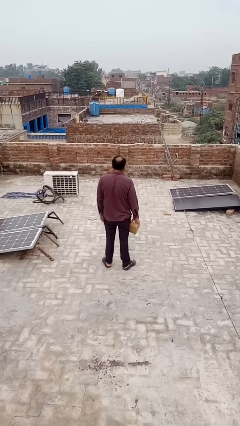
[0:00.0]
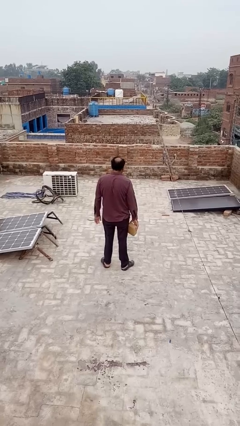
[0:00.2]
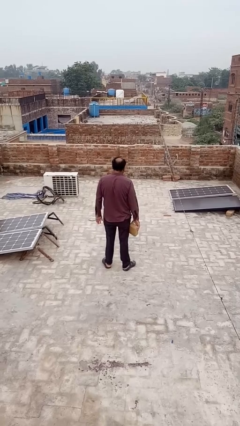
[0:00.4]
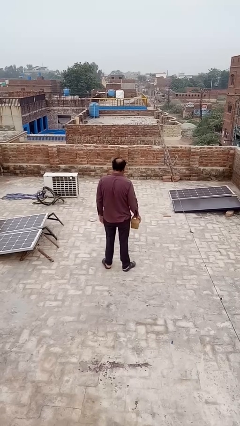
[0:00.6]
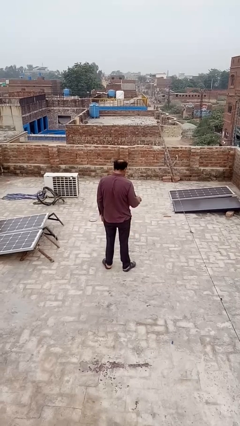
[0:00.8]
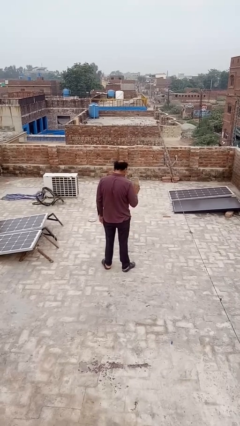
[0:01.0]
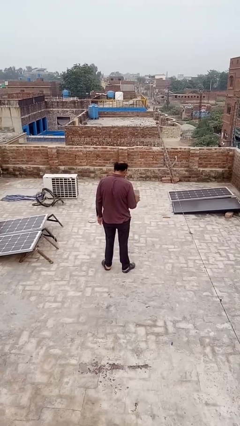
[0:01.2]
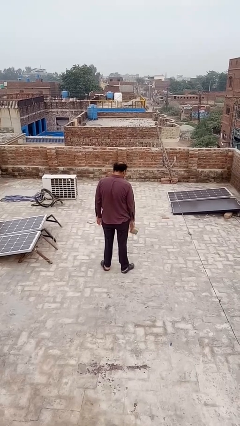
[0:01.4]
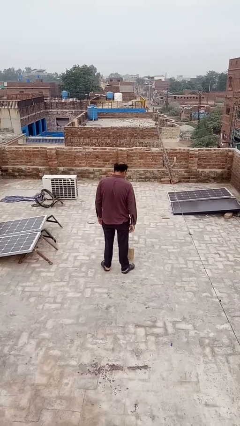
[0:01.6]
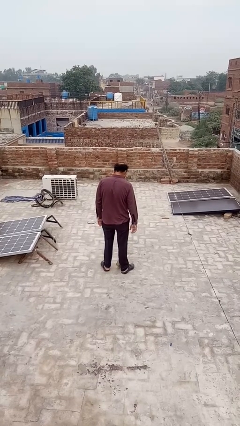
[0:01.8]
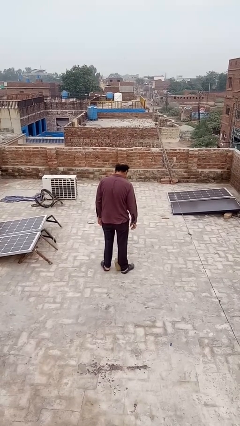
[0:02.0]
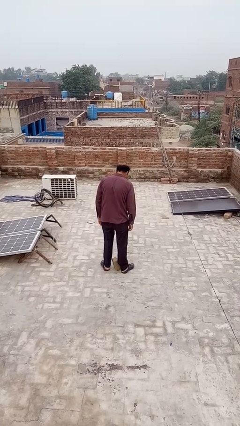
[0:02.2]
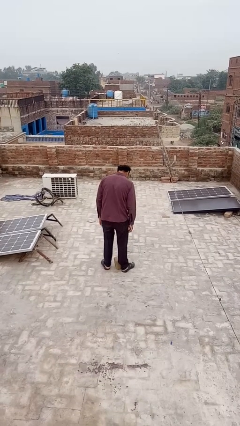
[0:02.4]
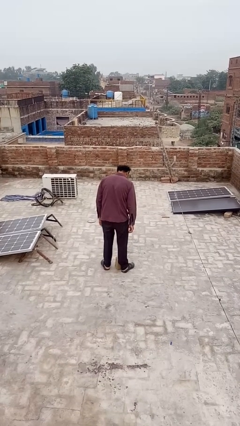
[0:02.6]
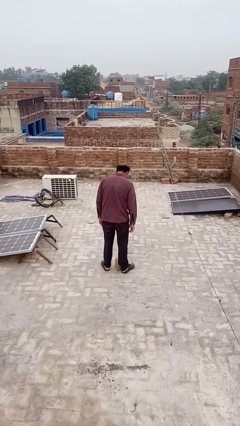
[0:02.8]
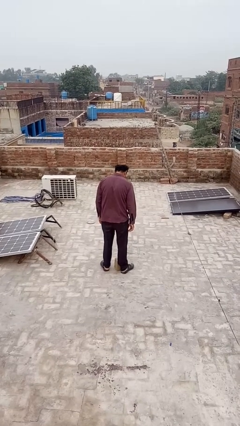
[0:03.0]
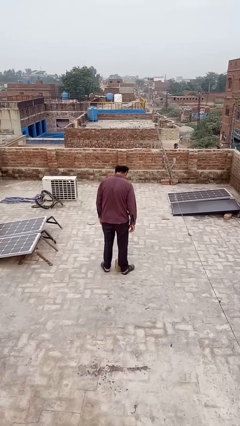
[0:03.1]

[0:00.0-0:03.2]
person throws object to ground

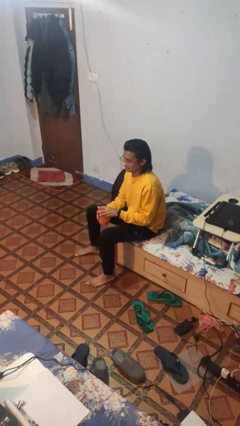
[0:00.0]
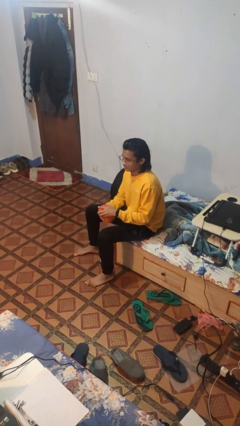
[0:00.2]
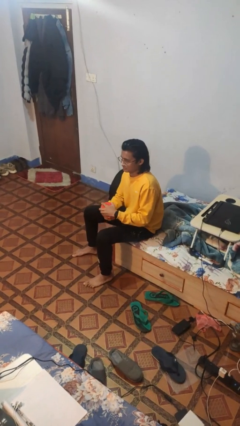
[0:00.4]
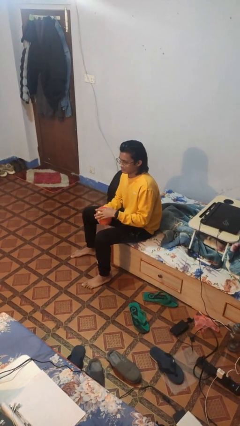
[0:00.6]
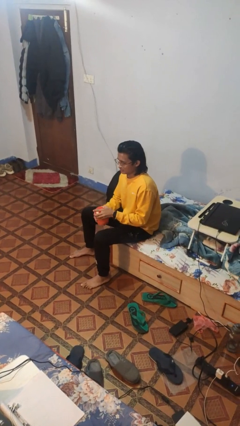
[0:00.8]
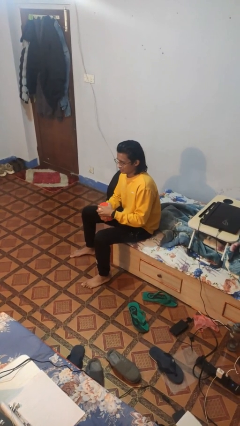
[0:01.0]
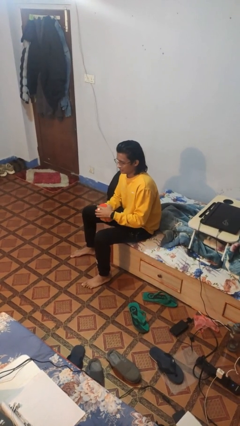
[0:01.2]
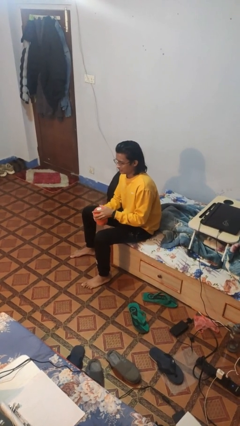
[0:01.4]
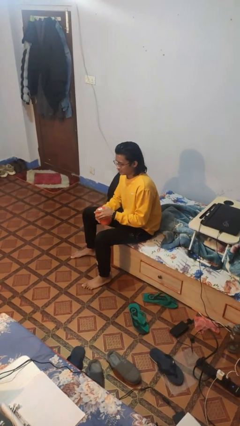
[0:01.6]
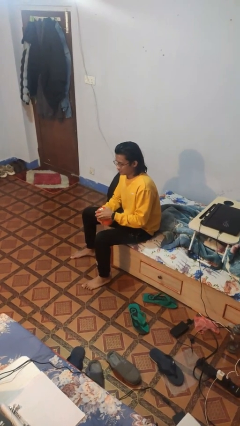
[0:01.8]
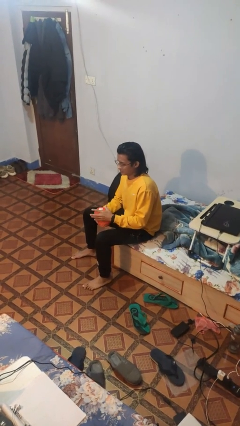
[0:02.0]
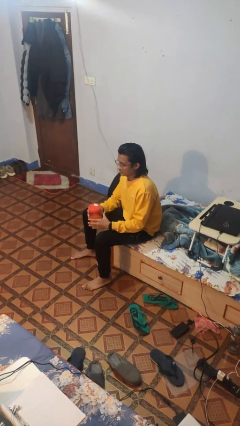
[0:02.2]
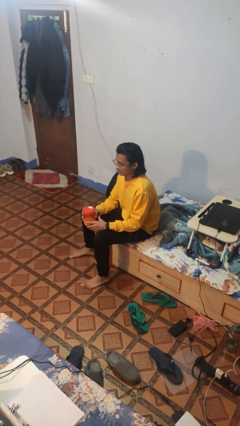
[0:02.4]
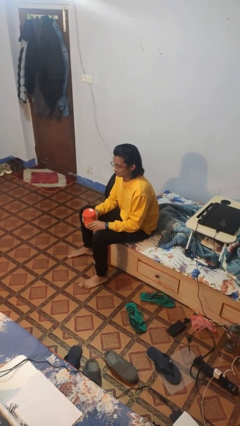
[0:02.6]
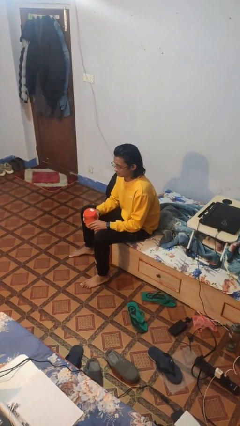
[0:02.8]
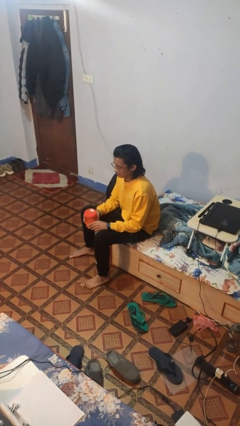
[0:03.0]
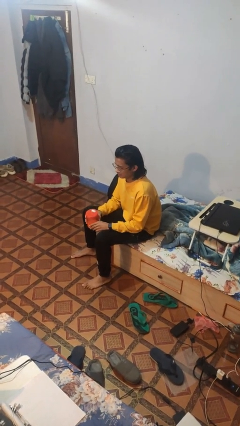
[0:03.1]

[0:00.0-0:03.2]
person closes jar

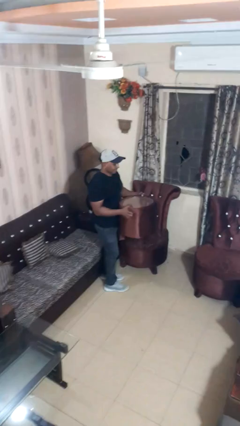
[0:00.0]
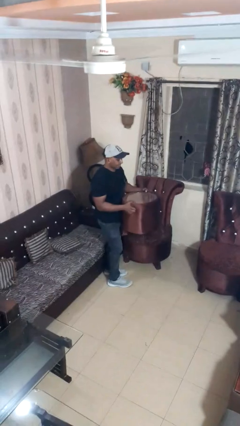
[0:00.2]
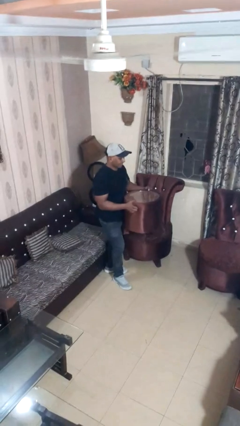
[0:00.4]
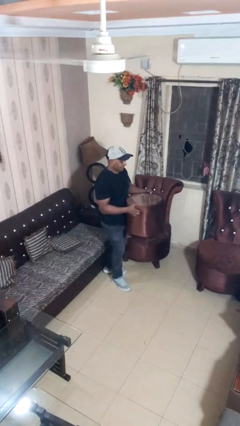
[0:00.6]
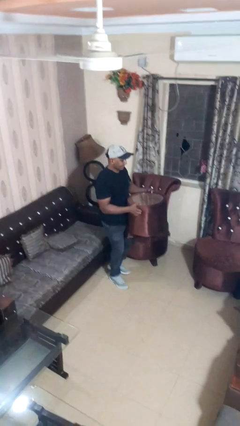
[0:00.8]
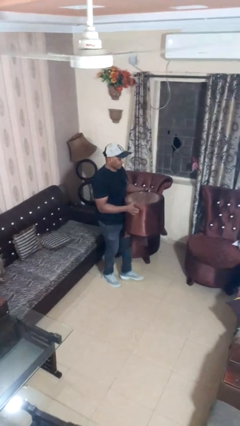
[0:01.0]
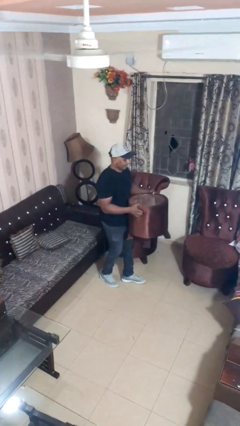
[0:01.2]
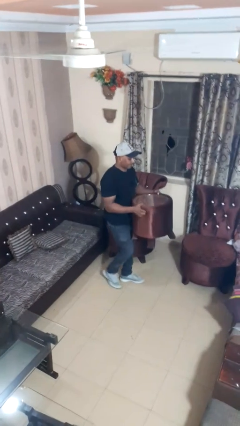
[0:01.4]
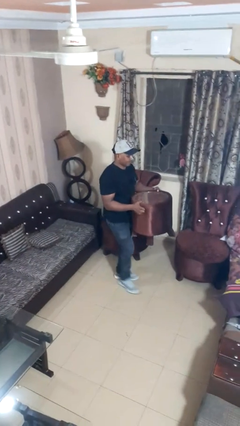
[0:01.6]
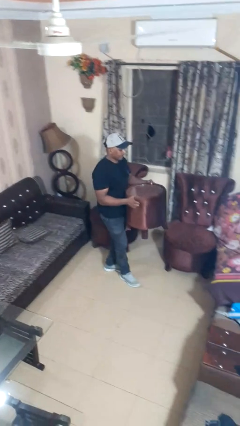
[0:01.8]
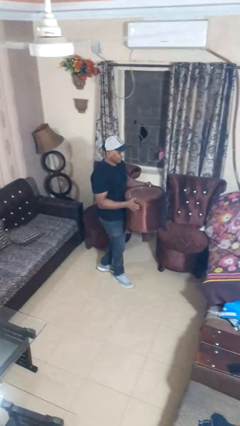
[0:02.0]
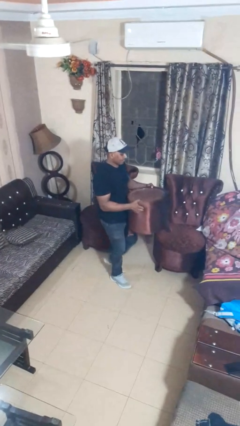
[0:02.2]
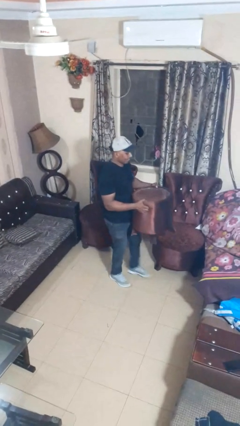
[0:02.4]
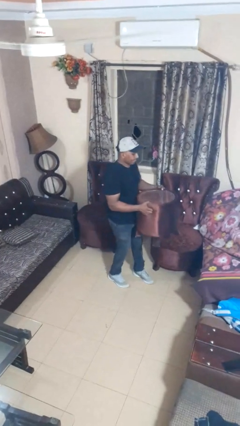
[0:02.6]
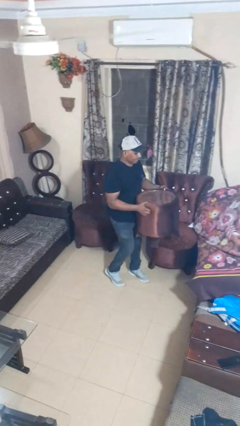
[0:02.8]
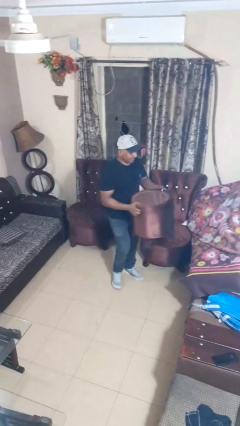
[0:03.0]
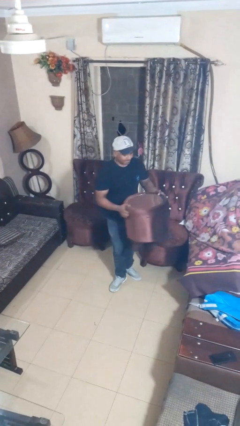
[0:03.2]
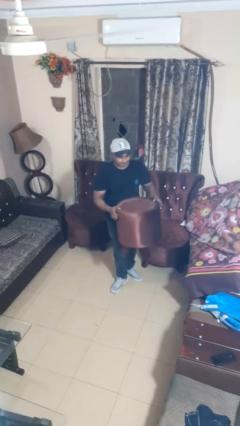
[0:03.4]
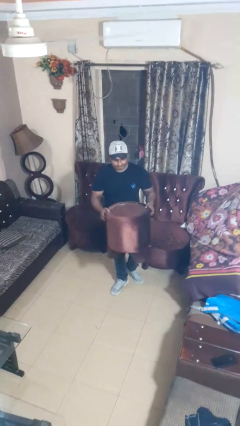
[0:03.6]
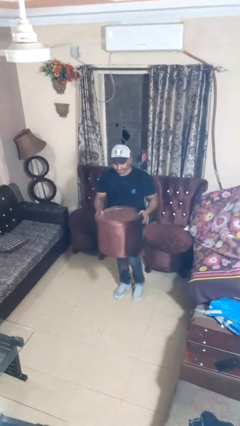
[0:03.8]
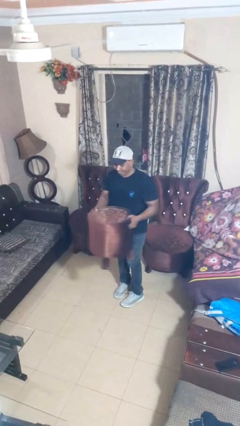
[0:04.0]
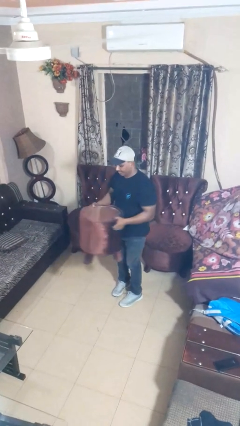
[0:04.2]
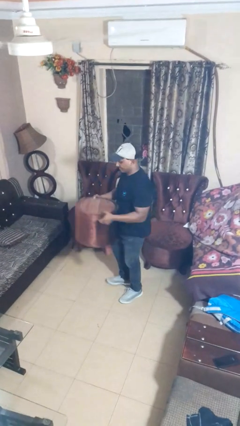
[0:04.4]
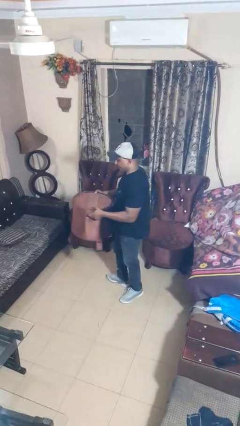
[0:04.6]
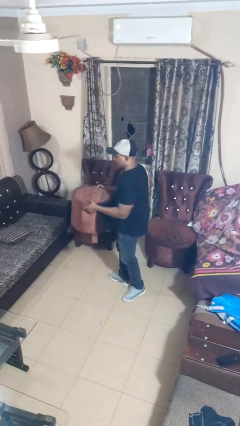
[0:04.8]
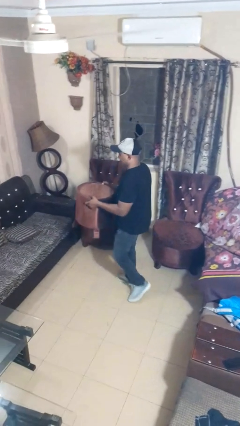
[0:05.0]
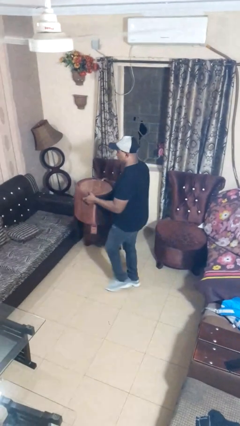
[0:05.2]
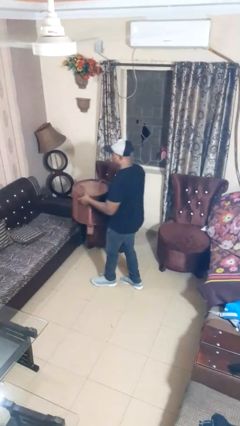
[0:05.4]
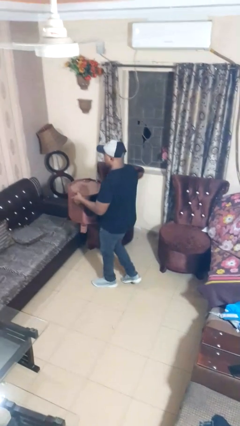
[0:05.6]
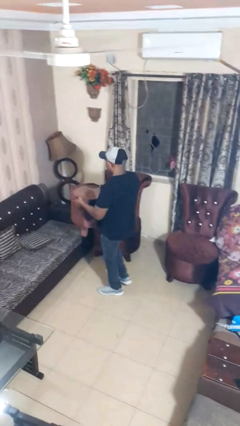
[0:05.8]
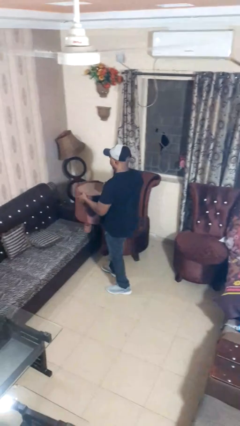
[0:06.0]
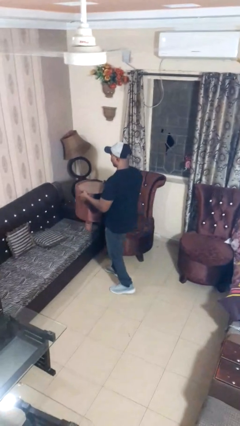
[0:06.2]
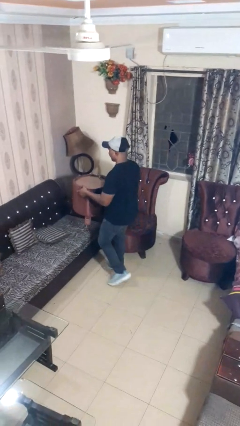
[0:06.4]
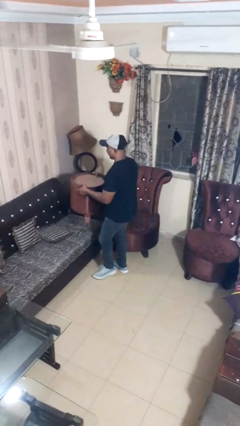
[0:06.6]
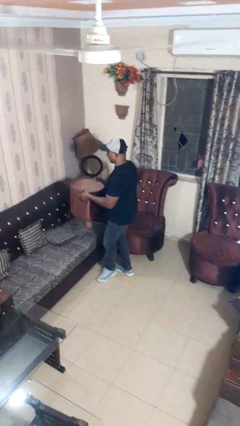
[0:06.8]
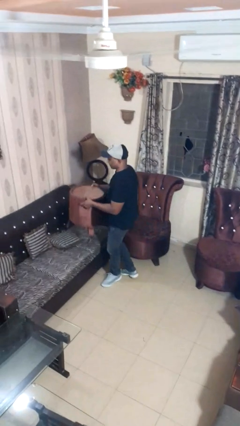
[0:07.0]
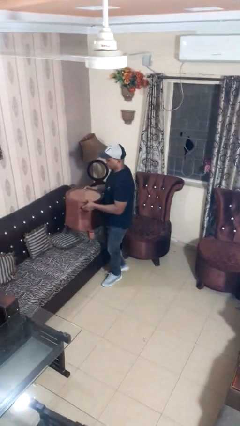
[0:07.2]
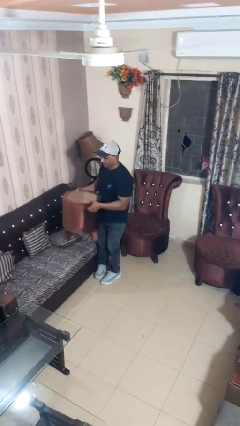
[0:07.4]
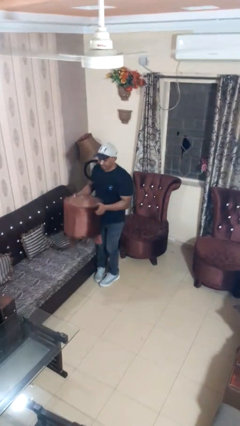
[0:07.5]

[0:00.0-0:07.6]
person carries furniture

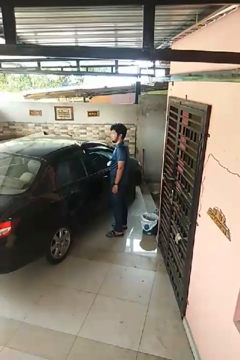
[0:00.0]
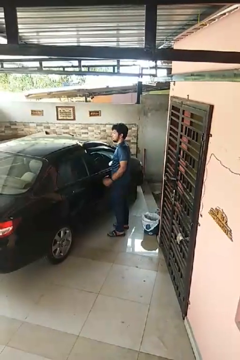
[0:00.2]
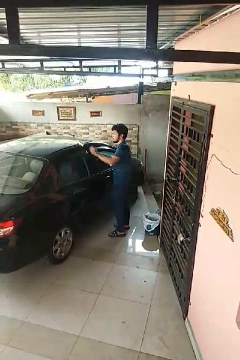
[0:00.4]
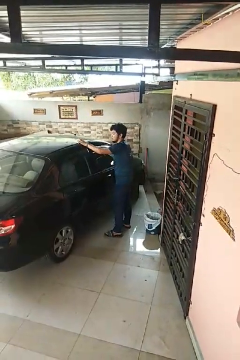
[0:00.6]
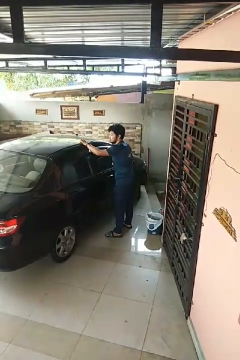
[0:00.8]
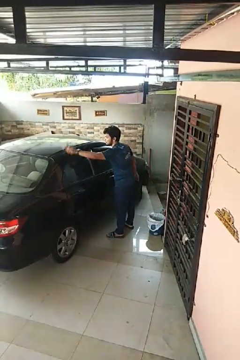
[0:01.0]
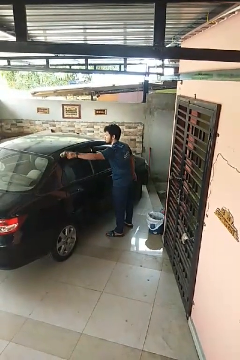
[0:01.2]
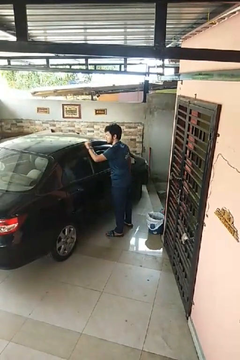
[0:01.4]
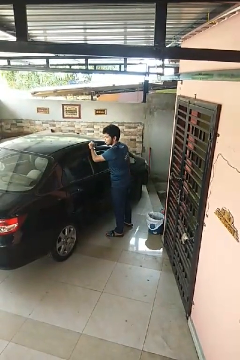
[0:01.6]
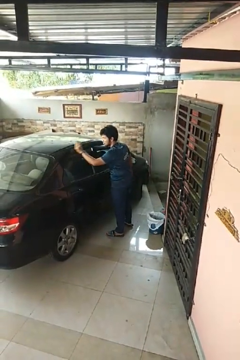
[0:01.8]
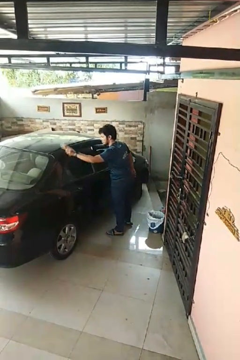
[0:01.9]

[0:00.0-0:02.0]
person polishes car with rag

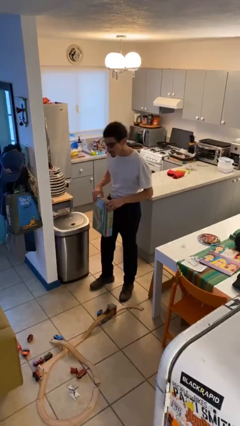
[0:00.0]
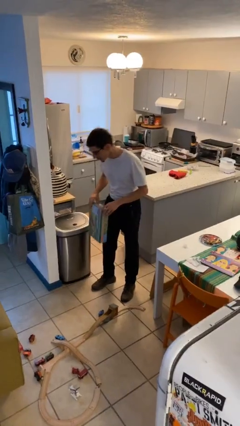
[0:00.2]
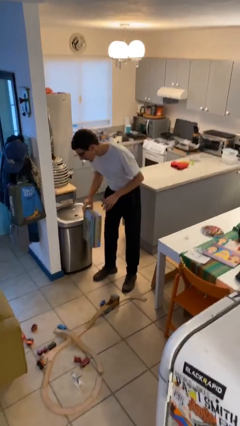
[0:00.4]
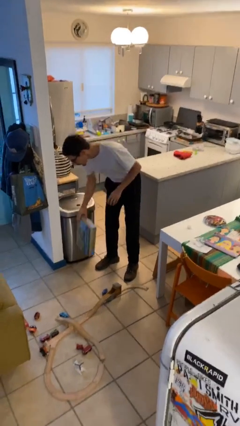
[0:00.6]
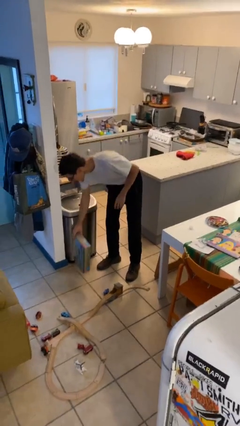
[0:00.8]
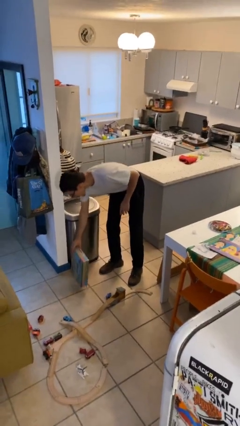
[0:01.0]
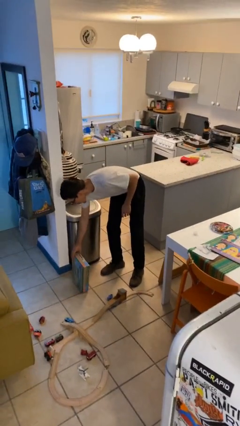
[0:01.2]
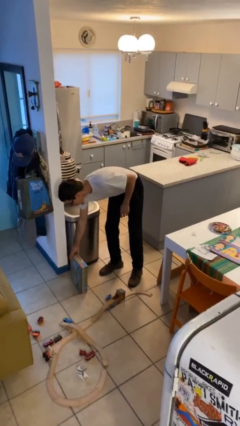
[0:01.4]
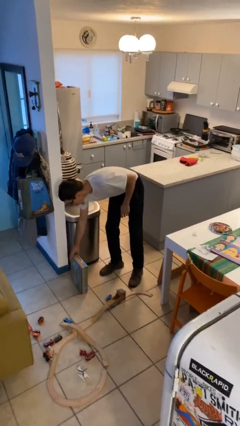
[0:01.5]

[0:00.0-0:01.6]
person puts down object on floor
